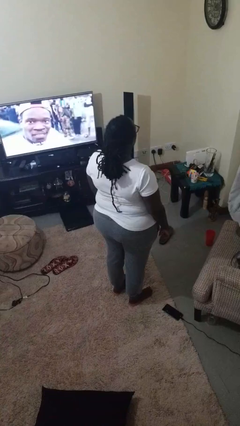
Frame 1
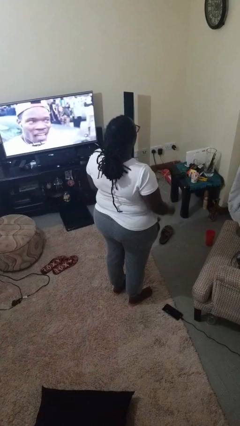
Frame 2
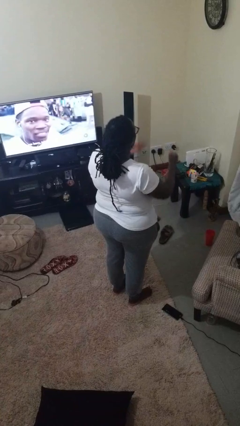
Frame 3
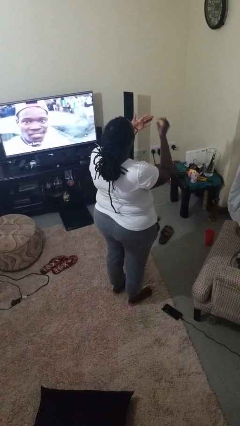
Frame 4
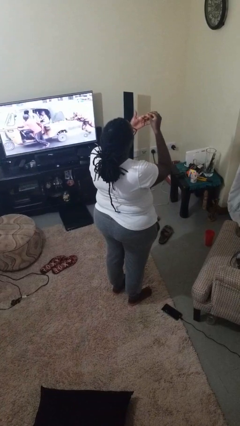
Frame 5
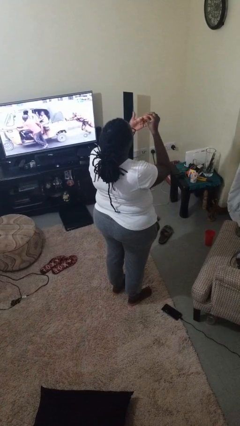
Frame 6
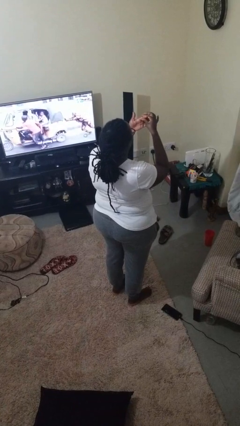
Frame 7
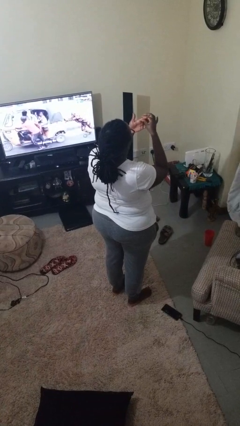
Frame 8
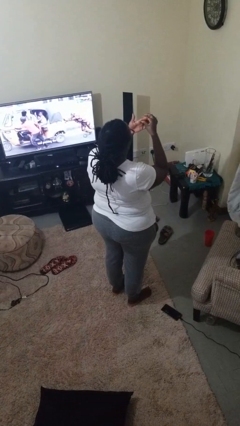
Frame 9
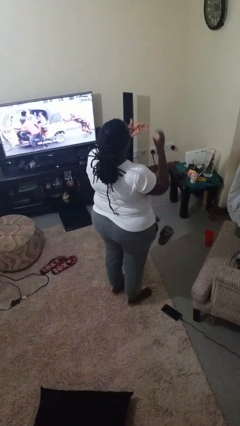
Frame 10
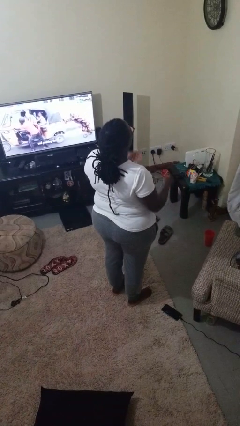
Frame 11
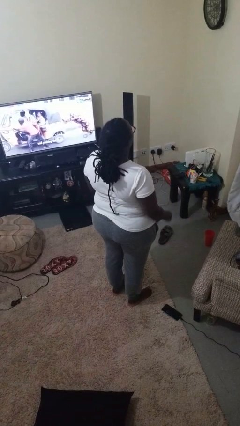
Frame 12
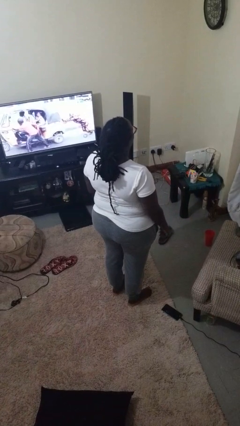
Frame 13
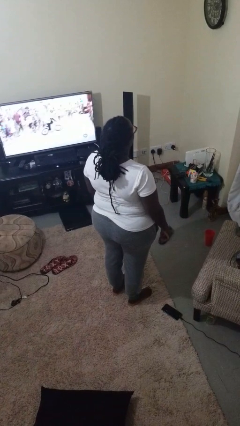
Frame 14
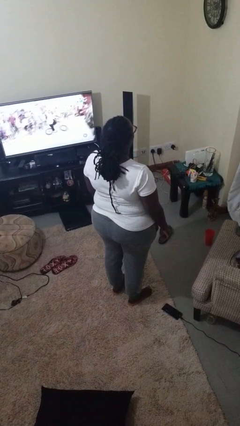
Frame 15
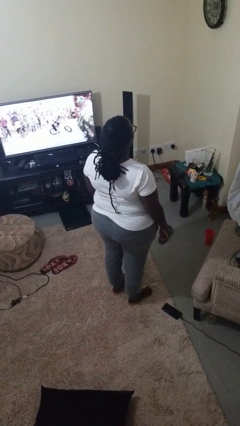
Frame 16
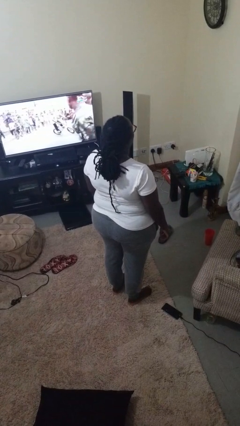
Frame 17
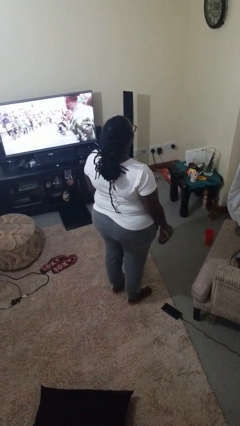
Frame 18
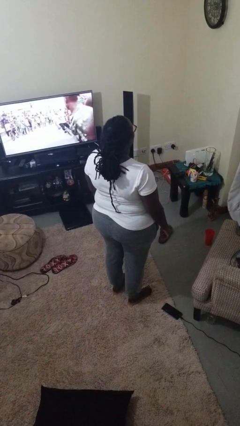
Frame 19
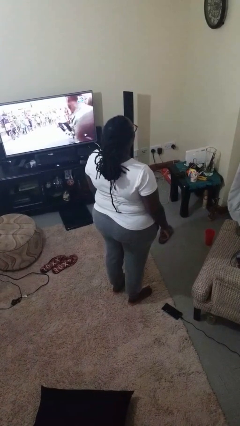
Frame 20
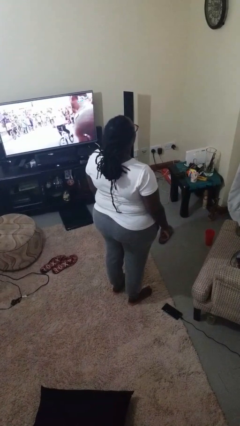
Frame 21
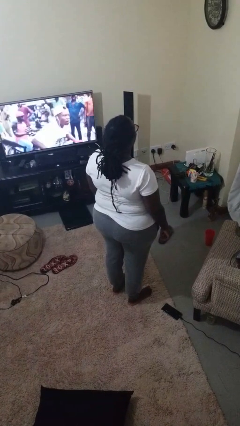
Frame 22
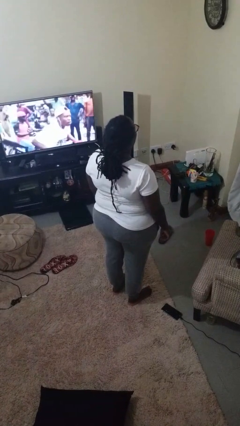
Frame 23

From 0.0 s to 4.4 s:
person puts on ring

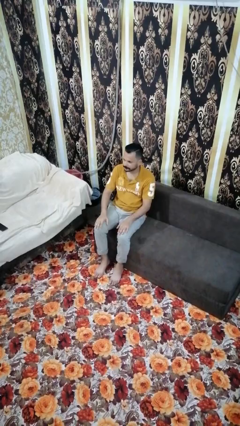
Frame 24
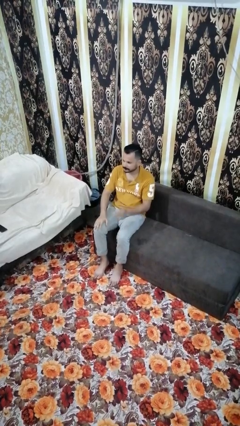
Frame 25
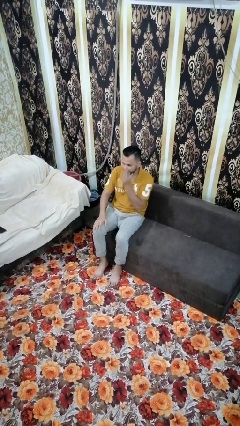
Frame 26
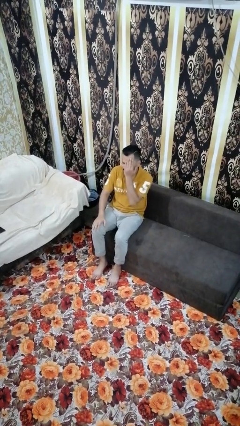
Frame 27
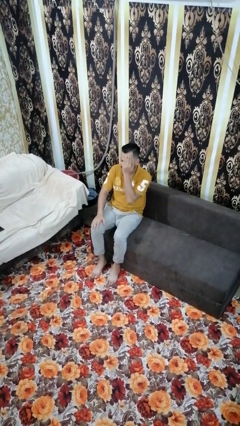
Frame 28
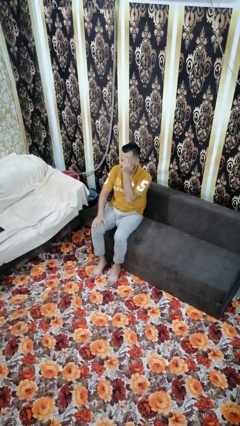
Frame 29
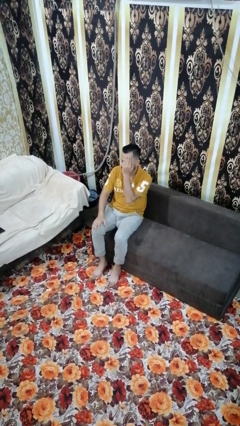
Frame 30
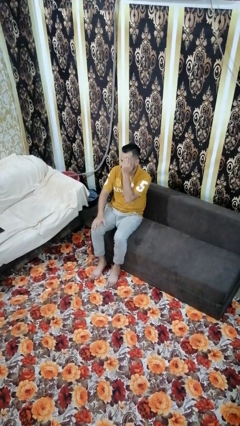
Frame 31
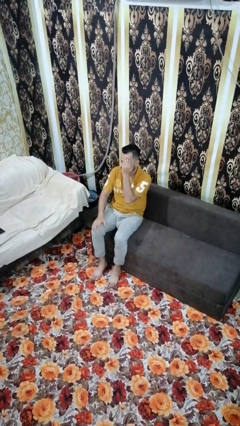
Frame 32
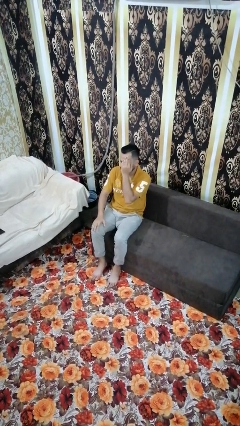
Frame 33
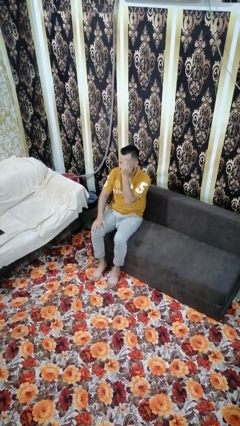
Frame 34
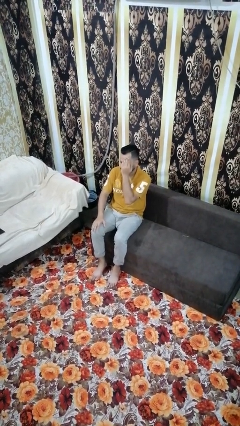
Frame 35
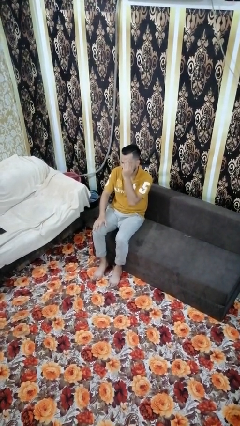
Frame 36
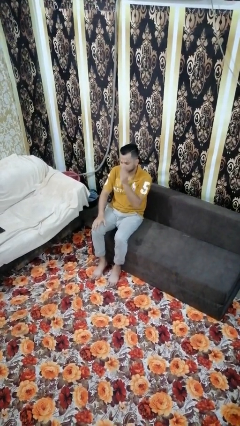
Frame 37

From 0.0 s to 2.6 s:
person covers face with hands

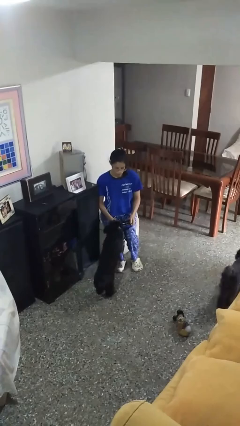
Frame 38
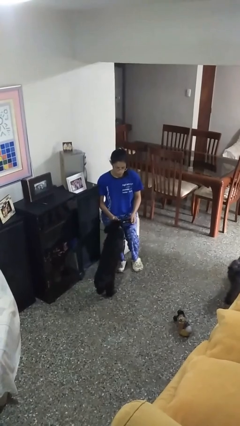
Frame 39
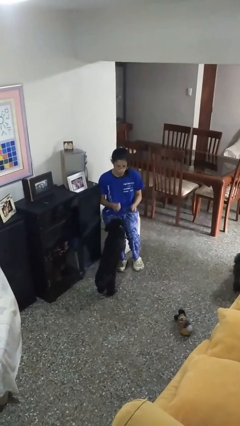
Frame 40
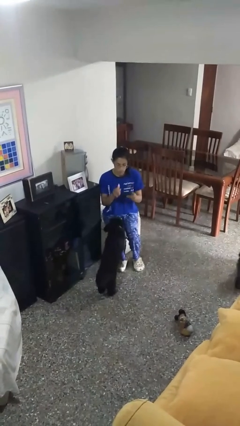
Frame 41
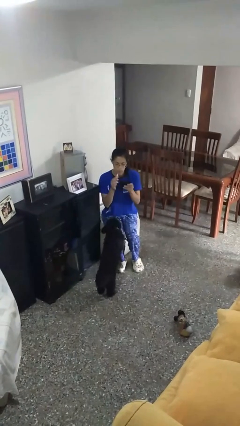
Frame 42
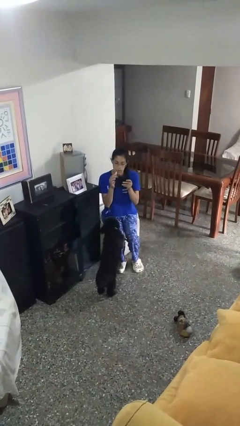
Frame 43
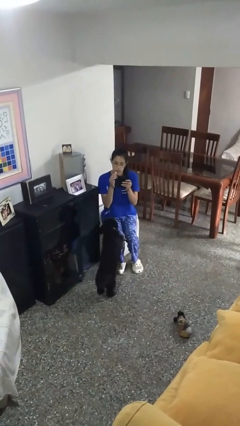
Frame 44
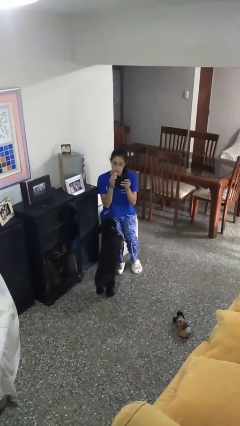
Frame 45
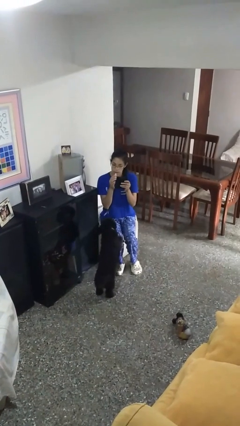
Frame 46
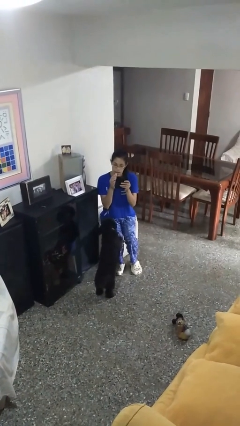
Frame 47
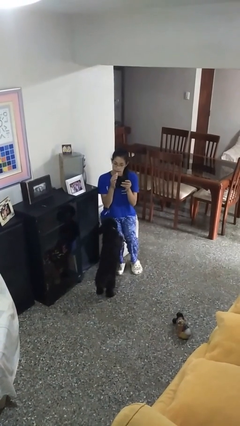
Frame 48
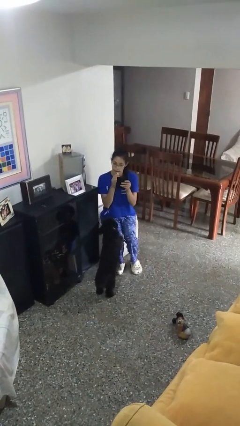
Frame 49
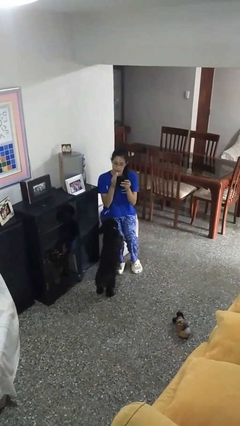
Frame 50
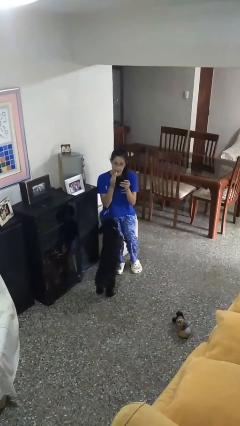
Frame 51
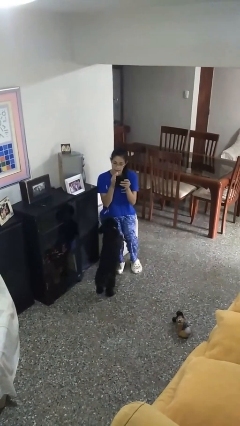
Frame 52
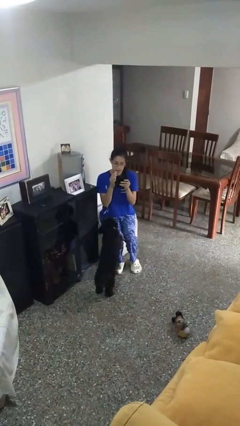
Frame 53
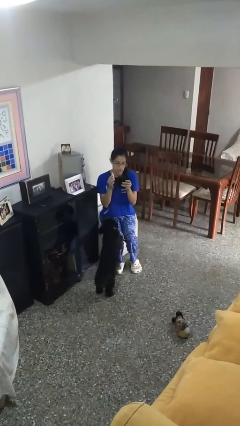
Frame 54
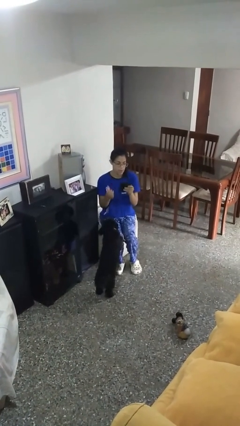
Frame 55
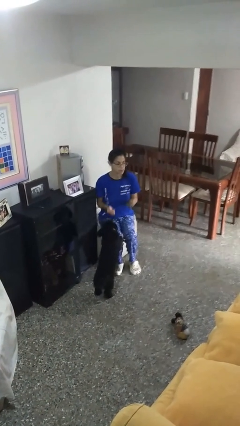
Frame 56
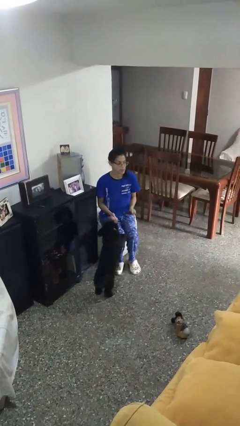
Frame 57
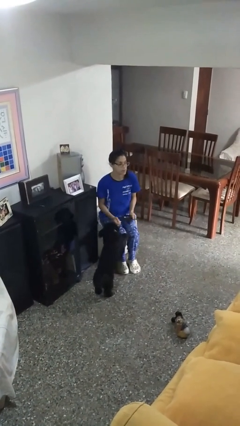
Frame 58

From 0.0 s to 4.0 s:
person applies lip makeup

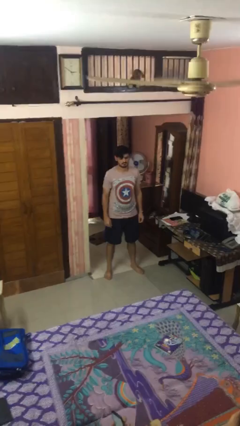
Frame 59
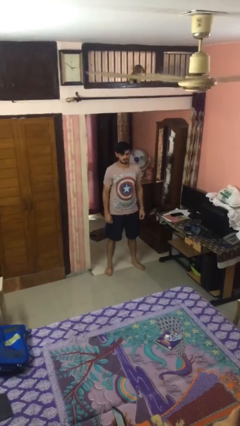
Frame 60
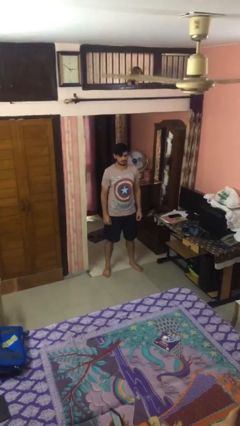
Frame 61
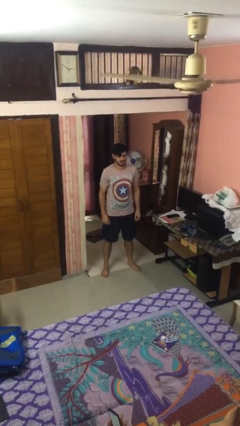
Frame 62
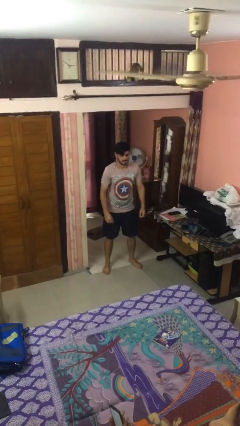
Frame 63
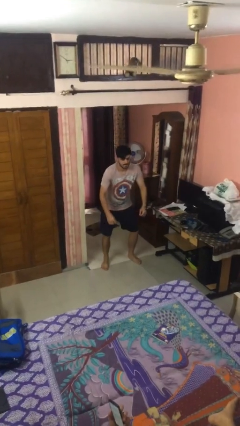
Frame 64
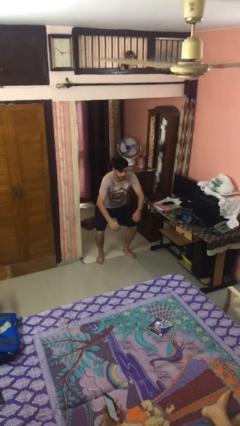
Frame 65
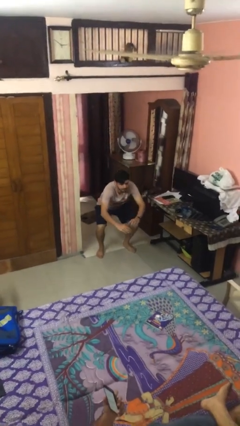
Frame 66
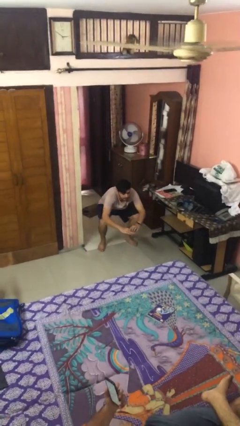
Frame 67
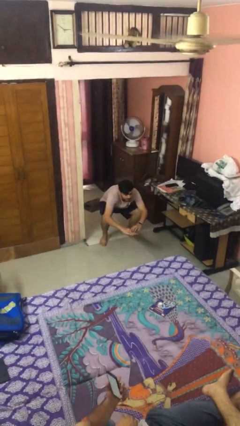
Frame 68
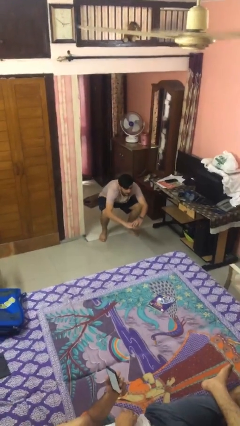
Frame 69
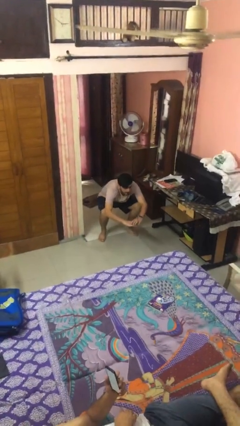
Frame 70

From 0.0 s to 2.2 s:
person squats

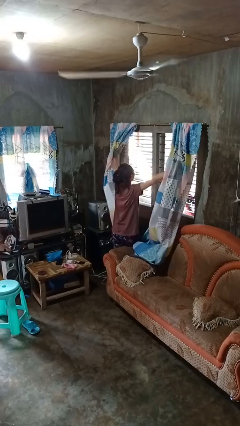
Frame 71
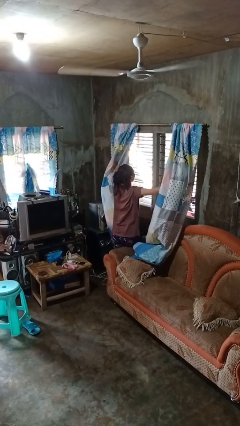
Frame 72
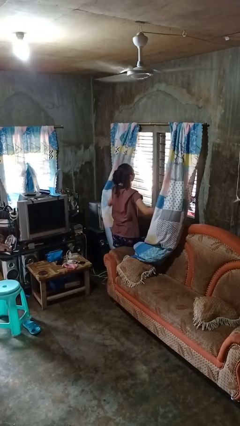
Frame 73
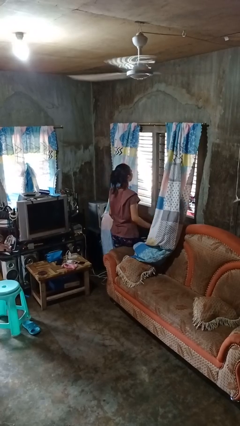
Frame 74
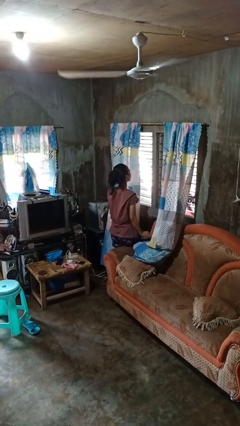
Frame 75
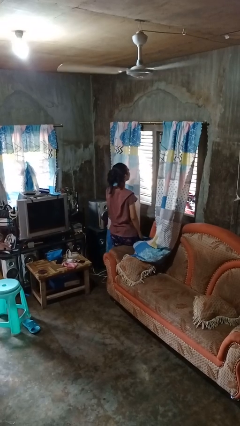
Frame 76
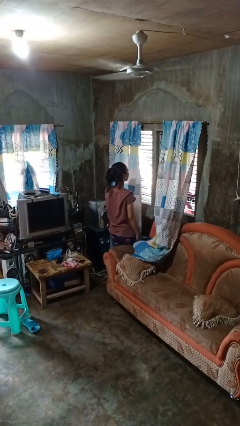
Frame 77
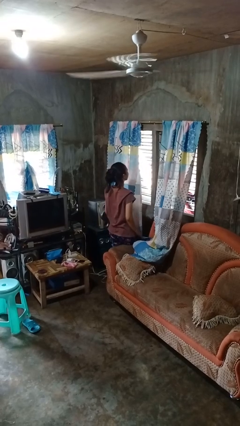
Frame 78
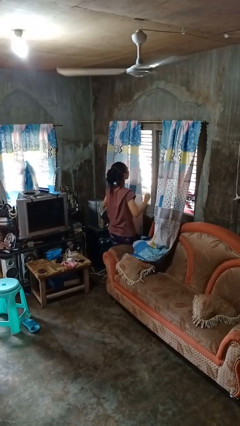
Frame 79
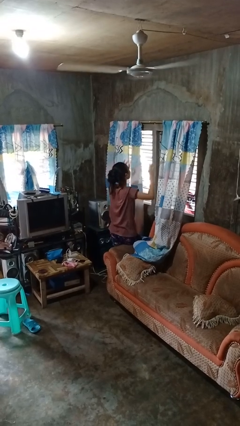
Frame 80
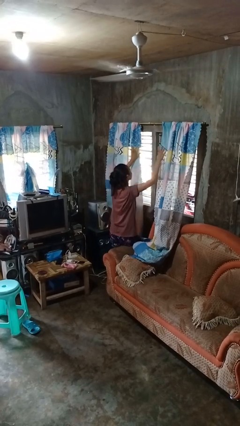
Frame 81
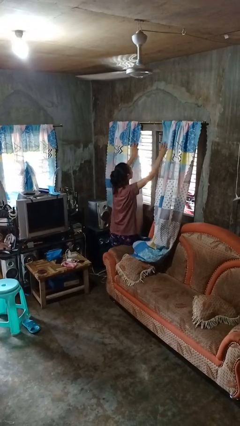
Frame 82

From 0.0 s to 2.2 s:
person opens curtains

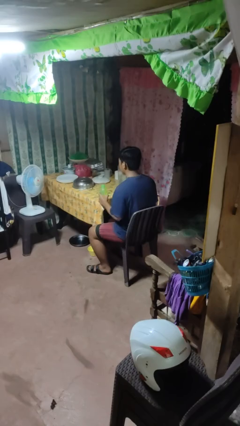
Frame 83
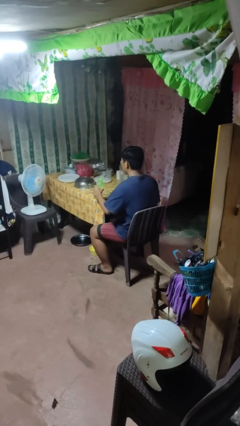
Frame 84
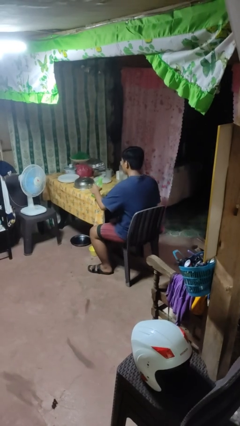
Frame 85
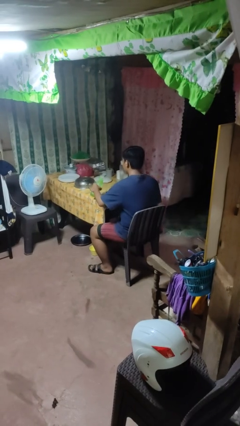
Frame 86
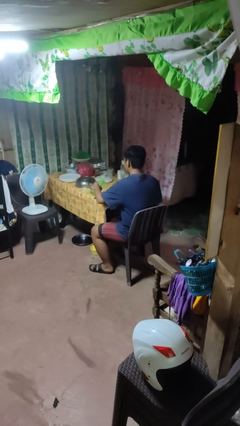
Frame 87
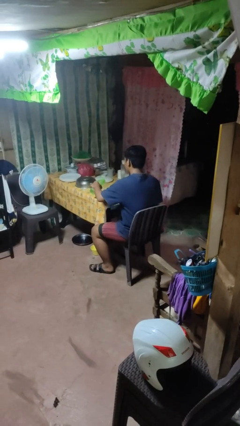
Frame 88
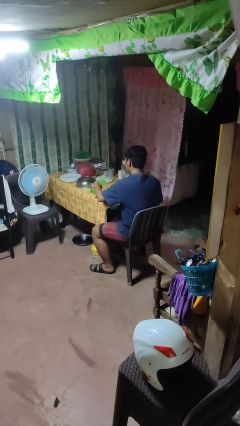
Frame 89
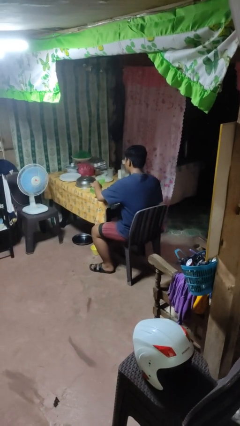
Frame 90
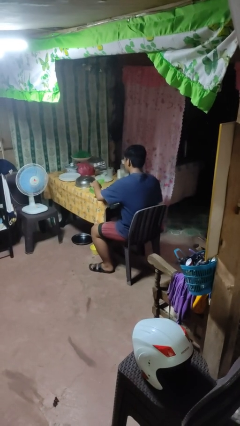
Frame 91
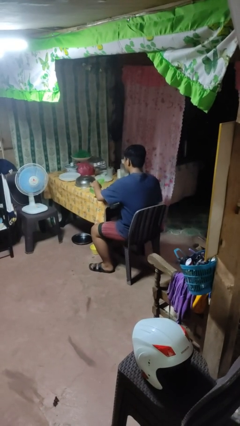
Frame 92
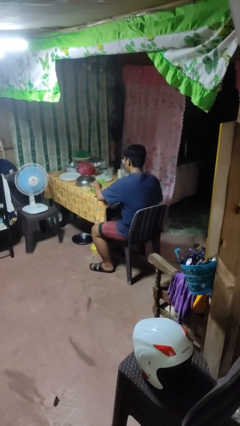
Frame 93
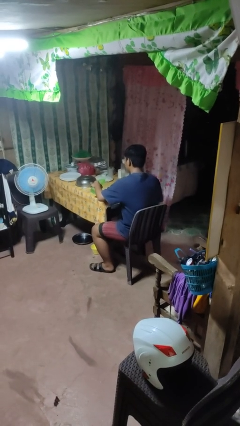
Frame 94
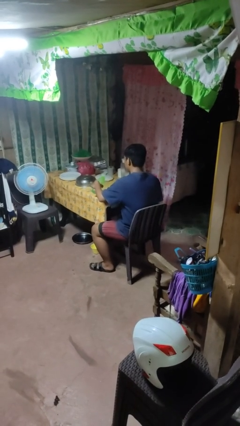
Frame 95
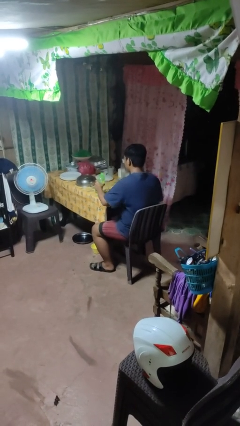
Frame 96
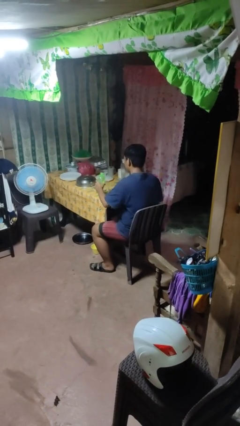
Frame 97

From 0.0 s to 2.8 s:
person pours liquid into cup
